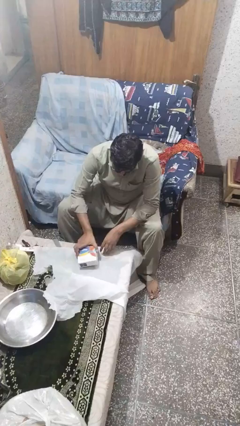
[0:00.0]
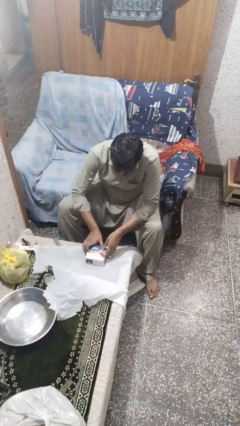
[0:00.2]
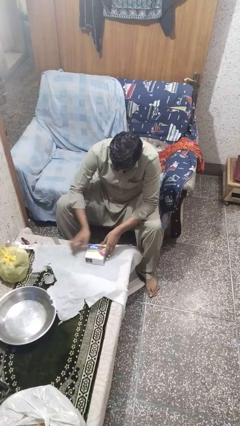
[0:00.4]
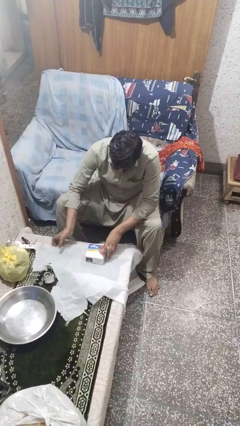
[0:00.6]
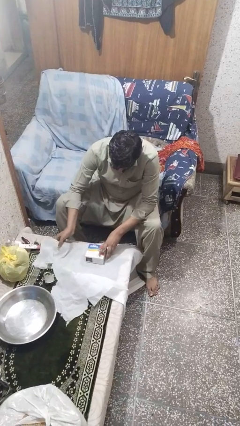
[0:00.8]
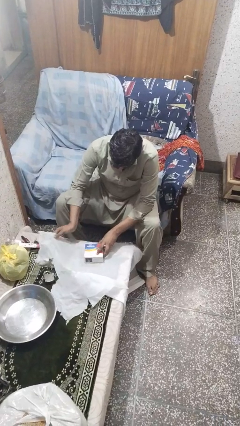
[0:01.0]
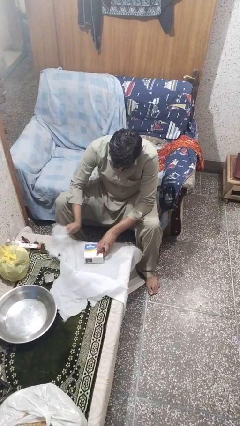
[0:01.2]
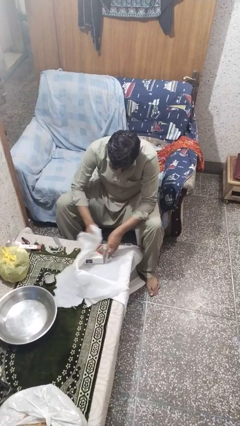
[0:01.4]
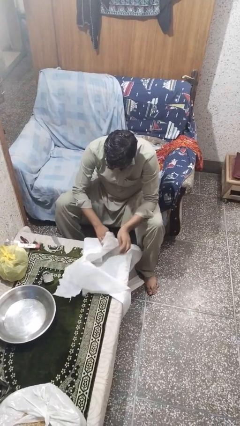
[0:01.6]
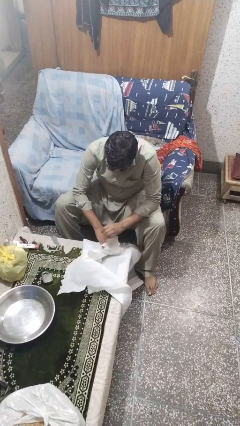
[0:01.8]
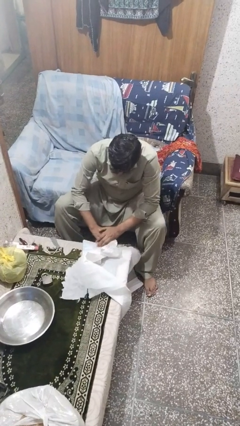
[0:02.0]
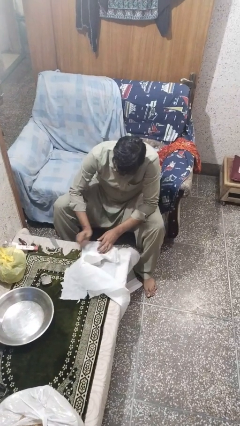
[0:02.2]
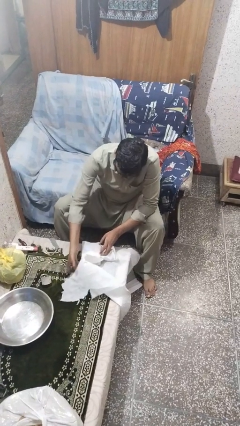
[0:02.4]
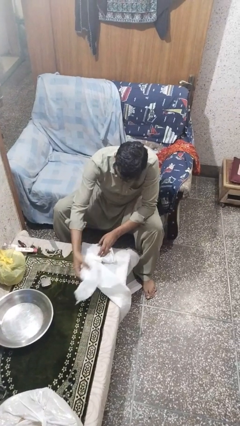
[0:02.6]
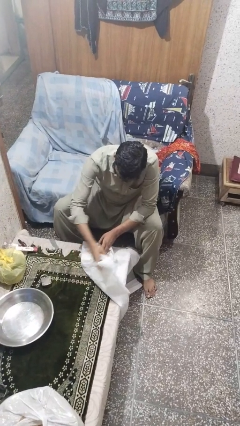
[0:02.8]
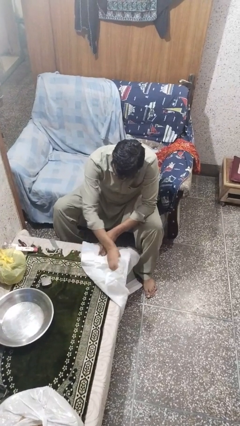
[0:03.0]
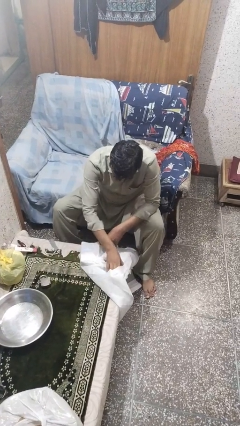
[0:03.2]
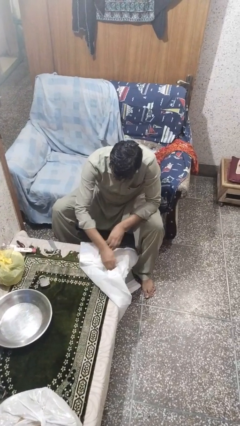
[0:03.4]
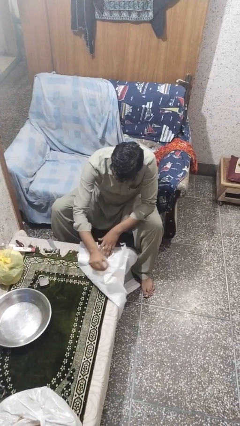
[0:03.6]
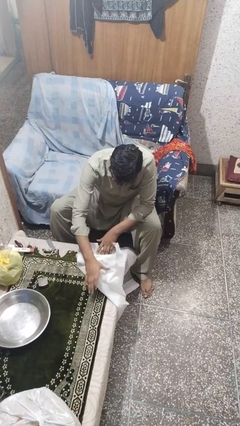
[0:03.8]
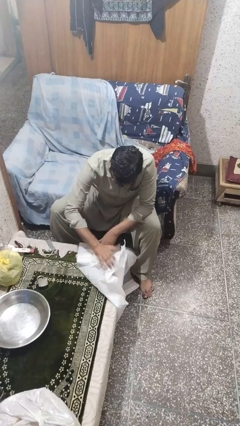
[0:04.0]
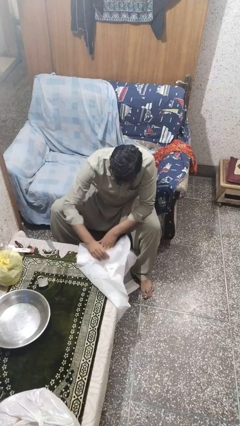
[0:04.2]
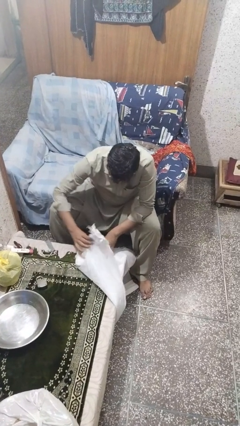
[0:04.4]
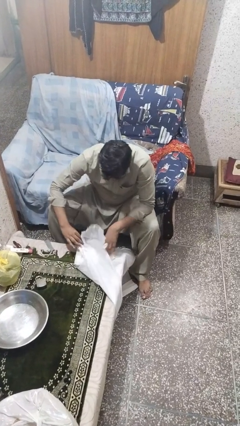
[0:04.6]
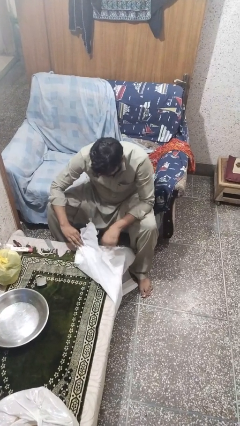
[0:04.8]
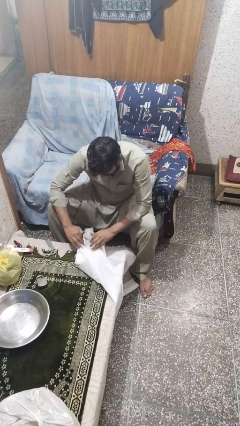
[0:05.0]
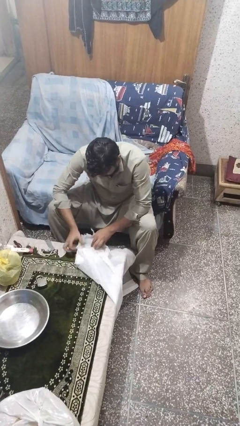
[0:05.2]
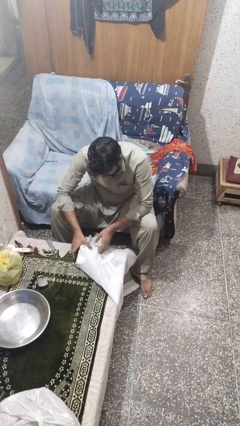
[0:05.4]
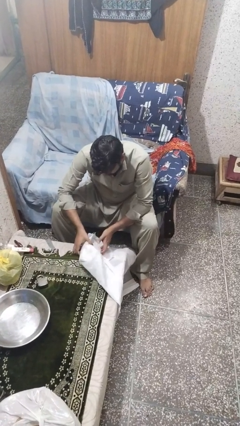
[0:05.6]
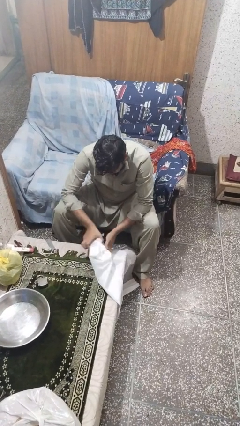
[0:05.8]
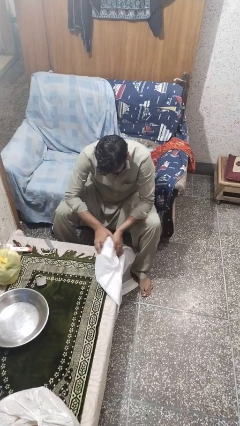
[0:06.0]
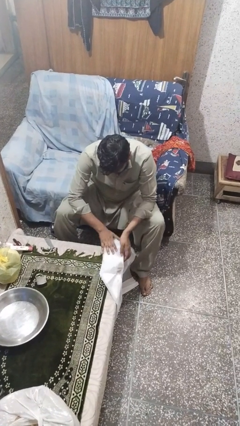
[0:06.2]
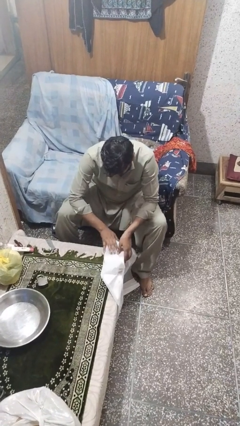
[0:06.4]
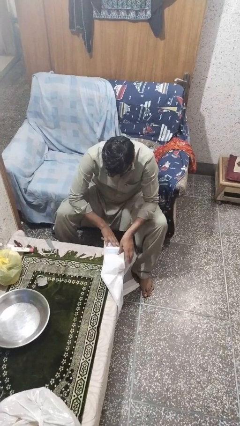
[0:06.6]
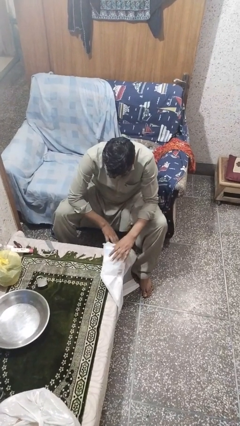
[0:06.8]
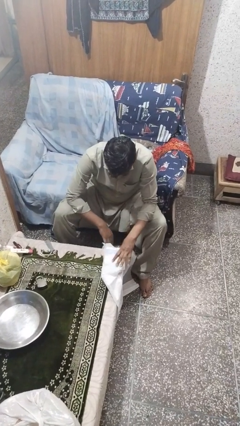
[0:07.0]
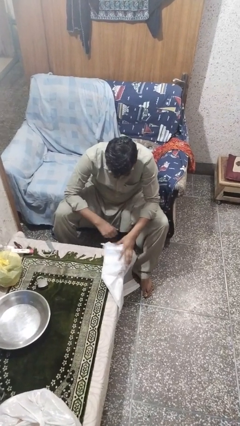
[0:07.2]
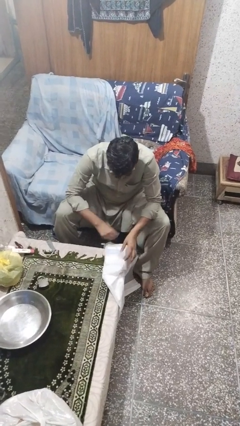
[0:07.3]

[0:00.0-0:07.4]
person wraps box

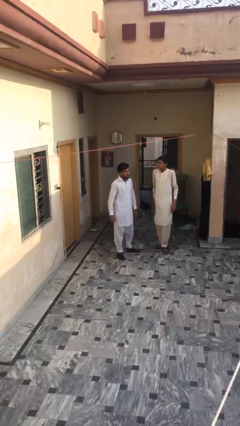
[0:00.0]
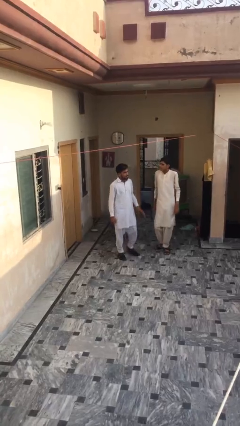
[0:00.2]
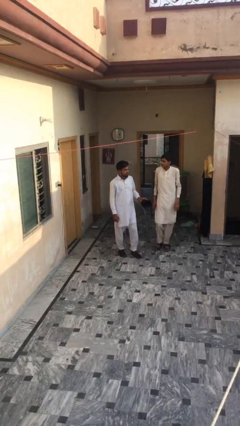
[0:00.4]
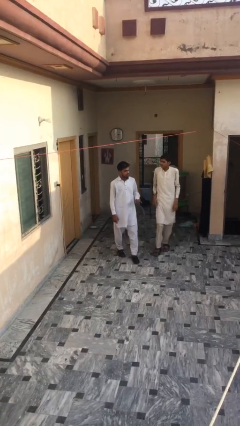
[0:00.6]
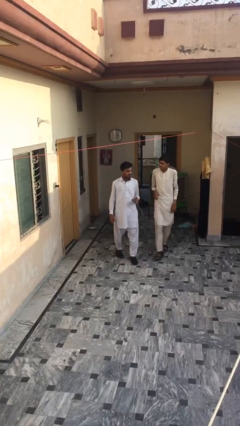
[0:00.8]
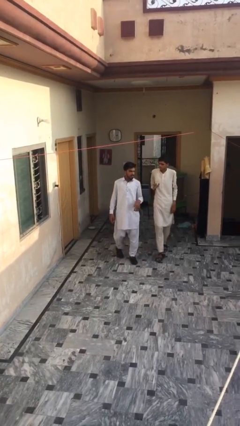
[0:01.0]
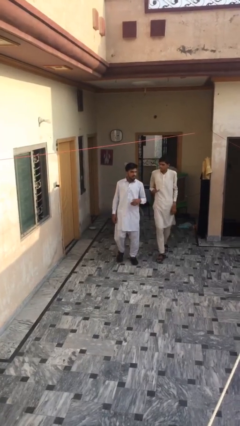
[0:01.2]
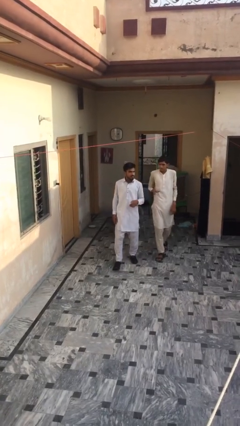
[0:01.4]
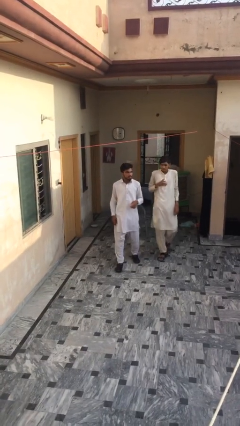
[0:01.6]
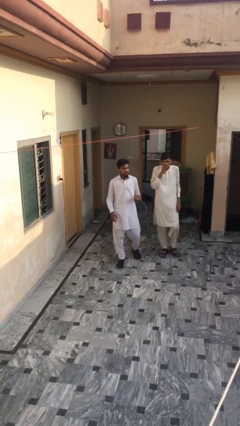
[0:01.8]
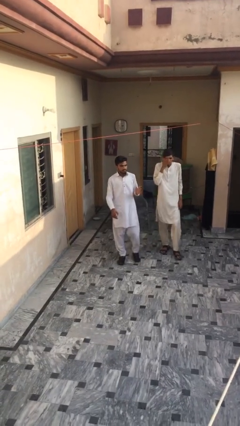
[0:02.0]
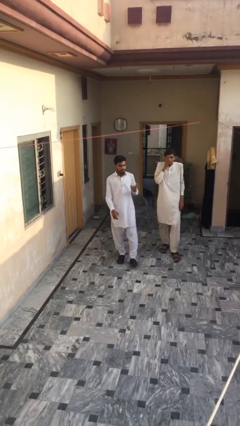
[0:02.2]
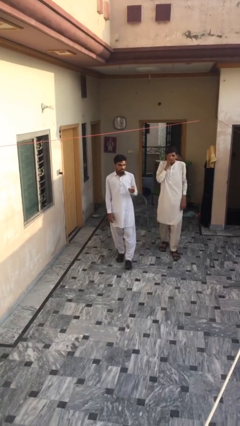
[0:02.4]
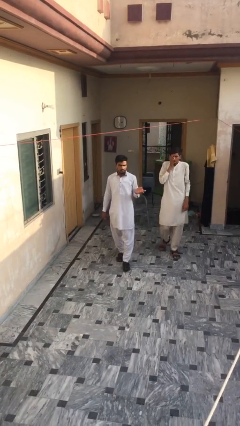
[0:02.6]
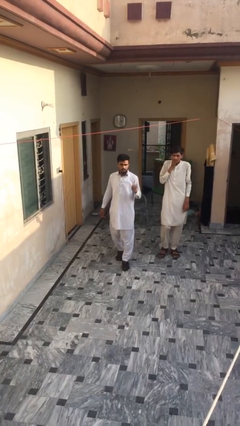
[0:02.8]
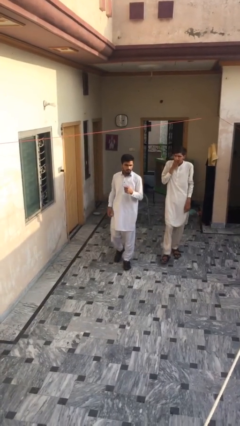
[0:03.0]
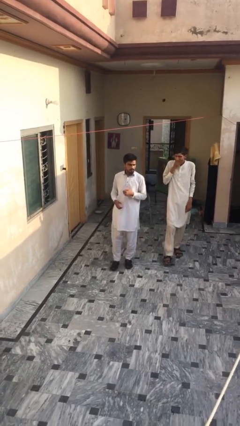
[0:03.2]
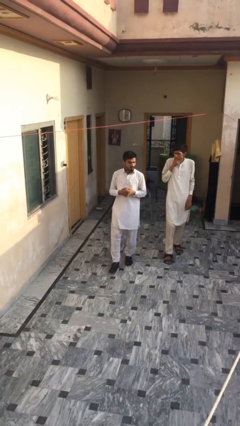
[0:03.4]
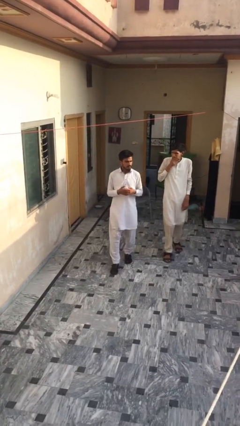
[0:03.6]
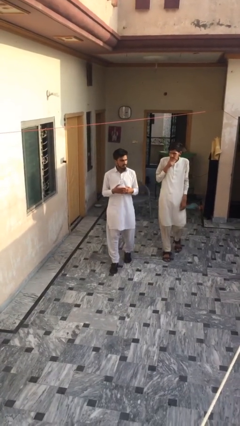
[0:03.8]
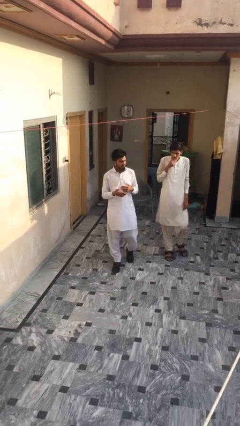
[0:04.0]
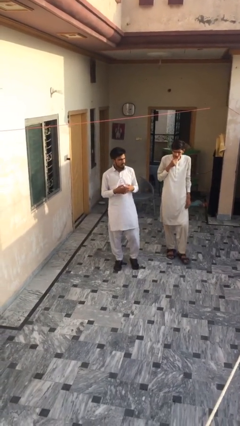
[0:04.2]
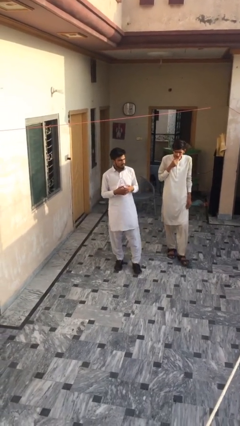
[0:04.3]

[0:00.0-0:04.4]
person talks to person

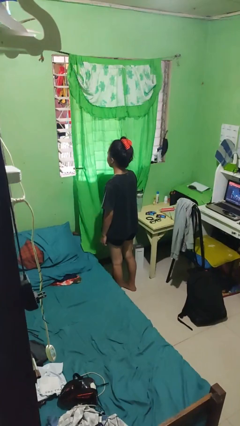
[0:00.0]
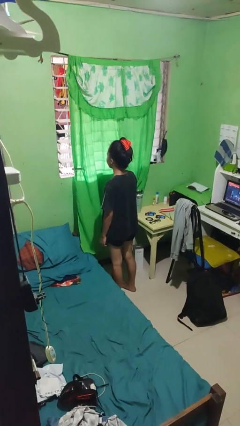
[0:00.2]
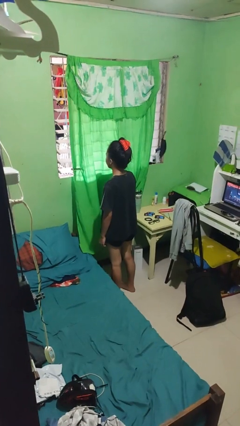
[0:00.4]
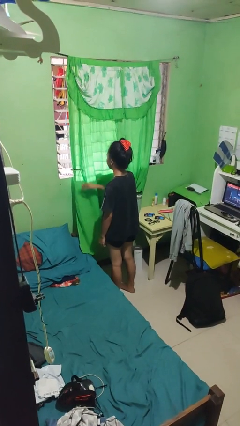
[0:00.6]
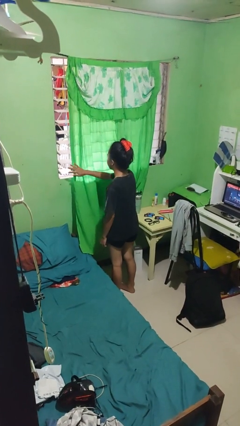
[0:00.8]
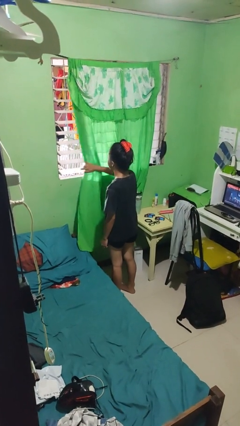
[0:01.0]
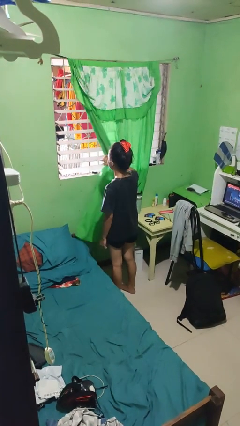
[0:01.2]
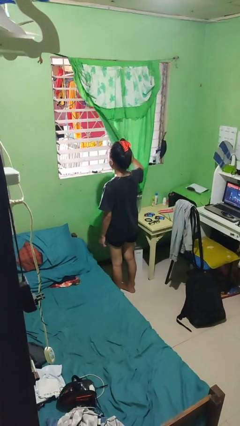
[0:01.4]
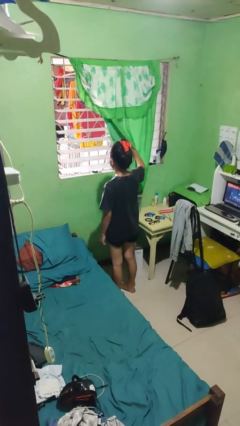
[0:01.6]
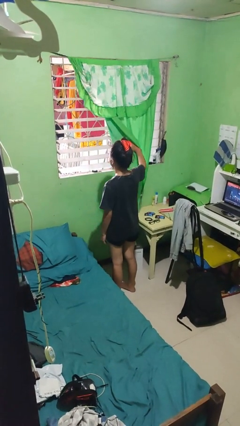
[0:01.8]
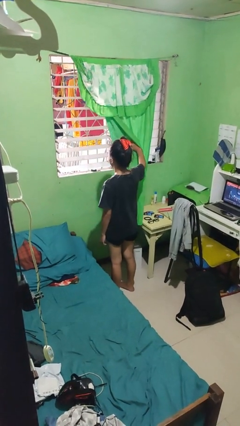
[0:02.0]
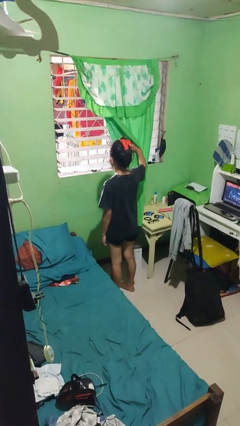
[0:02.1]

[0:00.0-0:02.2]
person opens curtains

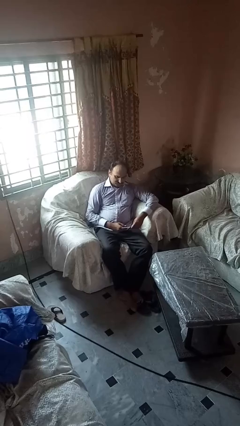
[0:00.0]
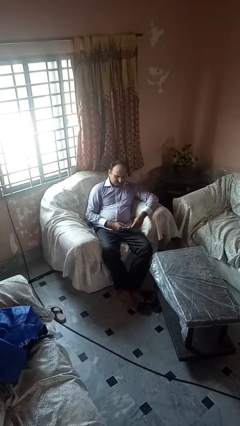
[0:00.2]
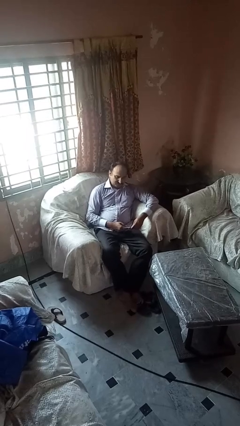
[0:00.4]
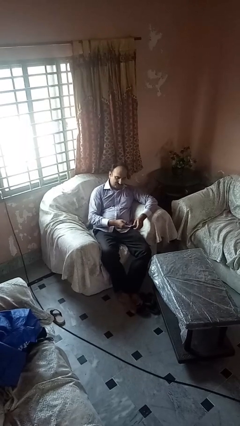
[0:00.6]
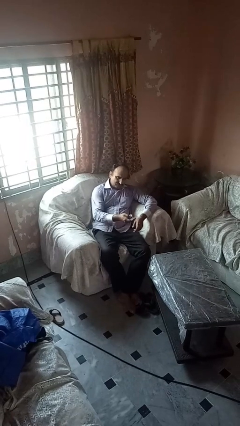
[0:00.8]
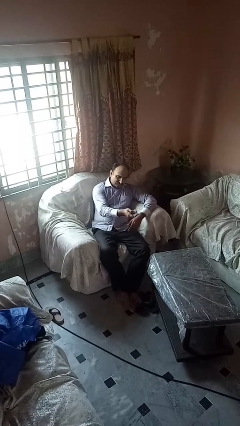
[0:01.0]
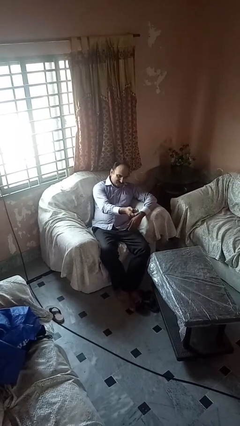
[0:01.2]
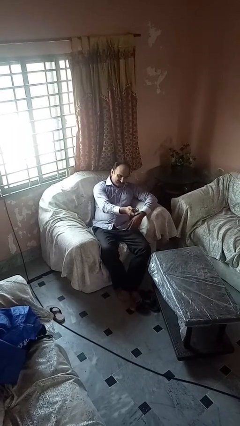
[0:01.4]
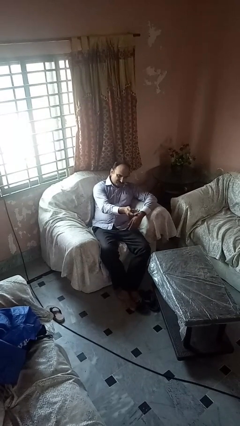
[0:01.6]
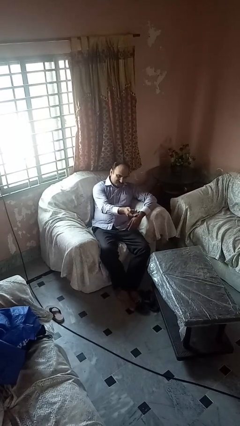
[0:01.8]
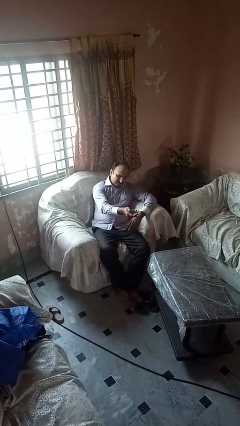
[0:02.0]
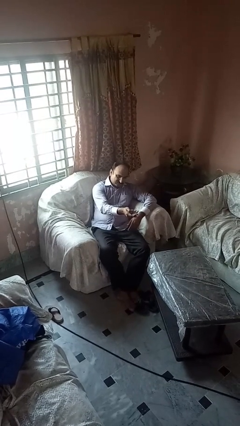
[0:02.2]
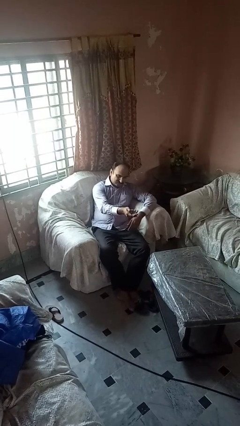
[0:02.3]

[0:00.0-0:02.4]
person uses television remote

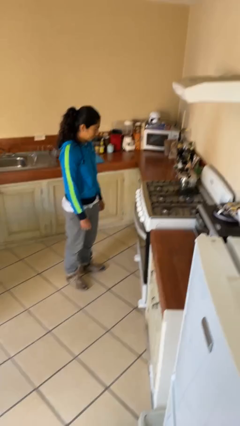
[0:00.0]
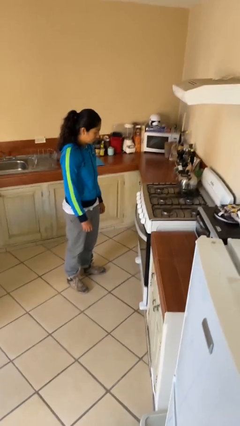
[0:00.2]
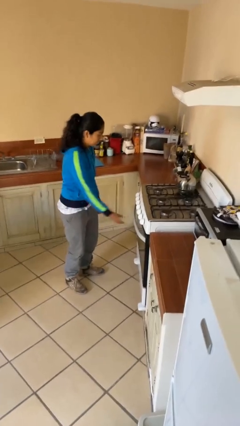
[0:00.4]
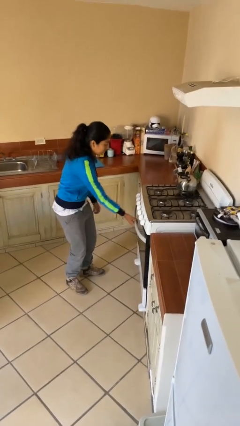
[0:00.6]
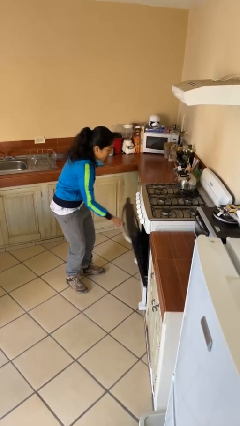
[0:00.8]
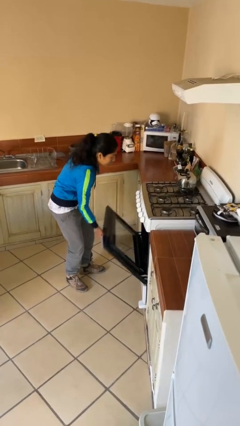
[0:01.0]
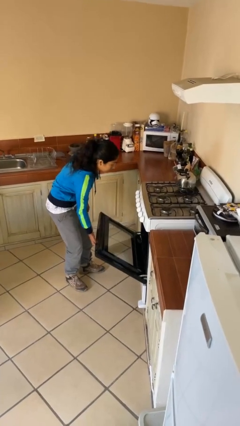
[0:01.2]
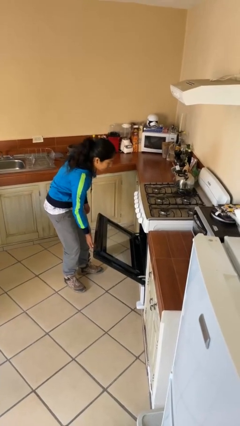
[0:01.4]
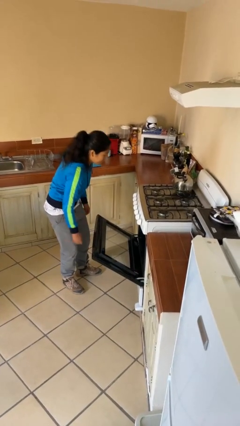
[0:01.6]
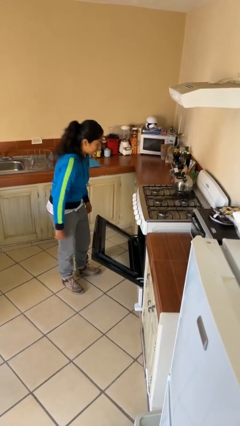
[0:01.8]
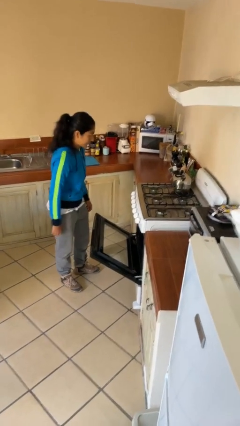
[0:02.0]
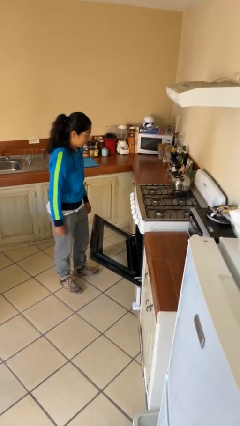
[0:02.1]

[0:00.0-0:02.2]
person opens oven door
